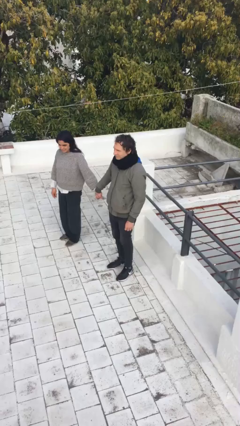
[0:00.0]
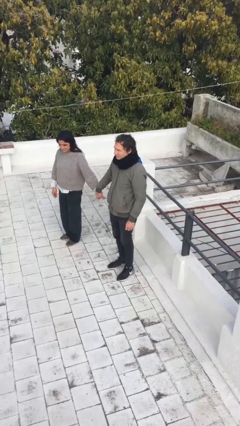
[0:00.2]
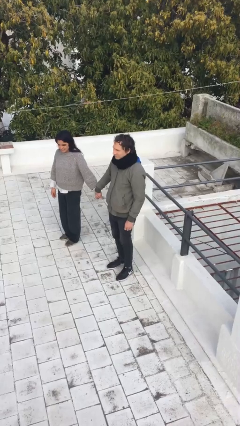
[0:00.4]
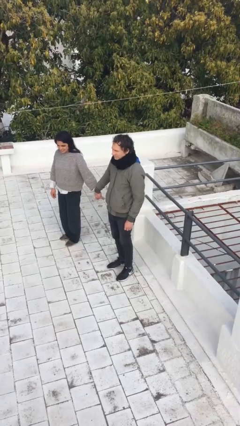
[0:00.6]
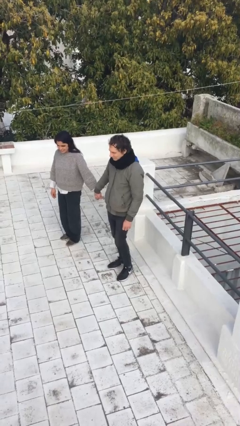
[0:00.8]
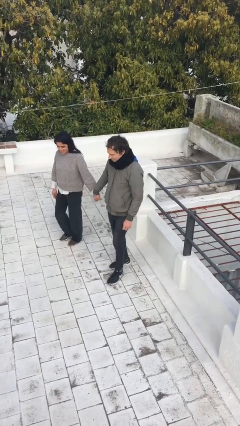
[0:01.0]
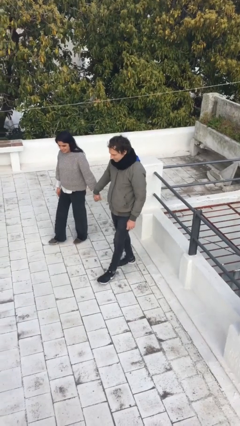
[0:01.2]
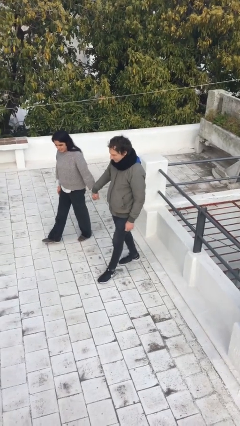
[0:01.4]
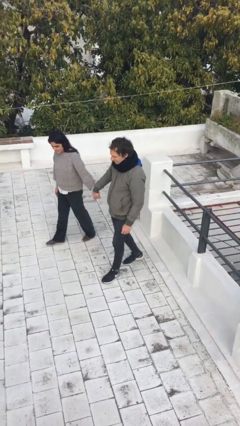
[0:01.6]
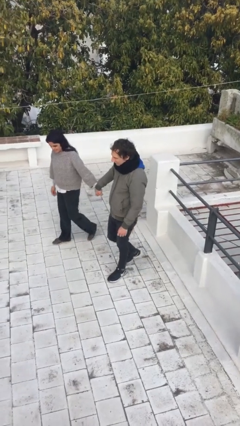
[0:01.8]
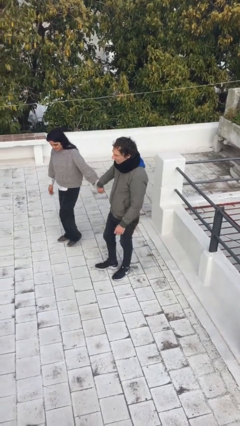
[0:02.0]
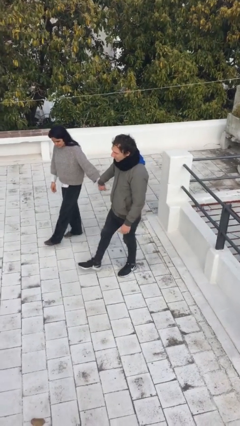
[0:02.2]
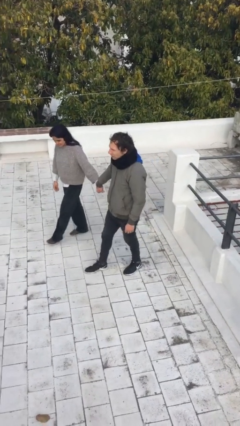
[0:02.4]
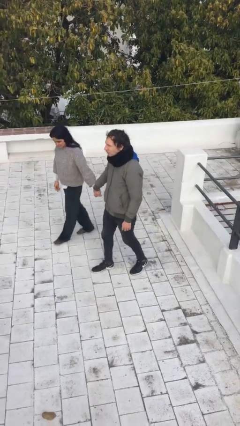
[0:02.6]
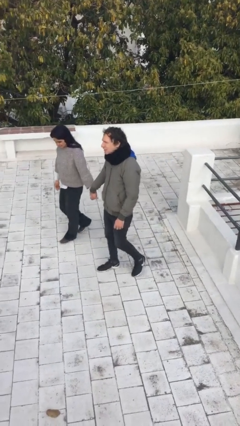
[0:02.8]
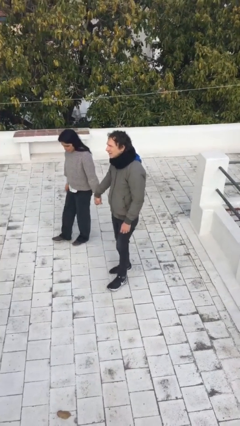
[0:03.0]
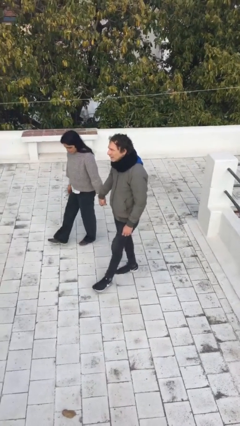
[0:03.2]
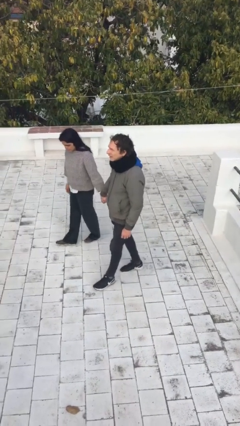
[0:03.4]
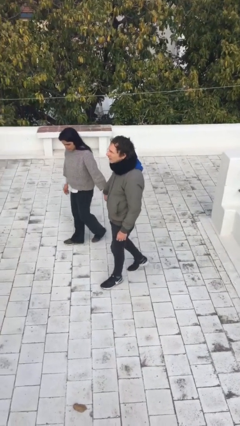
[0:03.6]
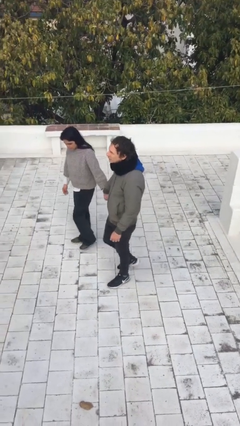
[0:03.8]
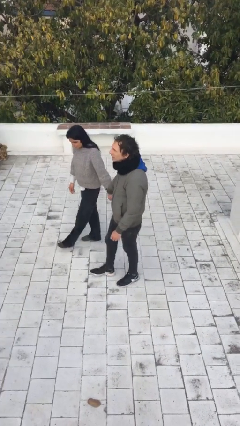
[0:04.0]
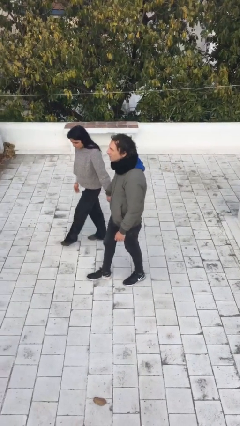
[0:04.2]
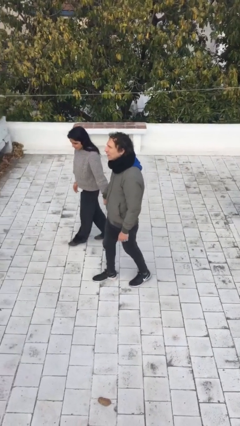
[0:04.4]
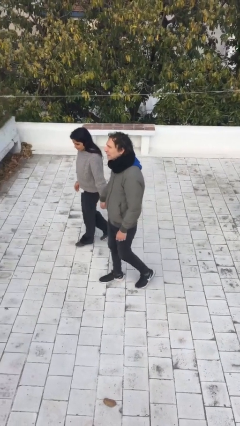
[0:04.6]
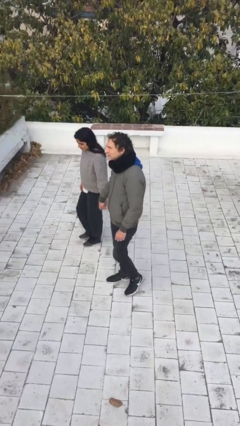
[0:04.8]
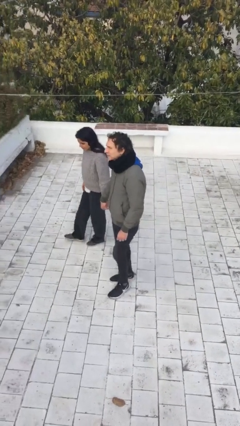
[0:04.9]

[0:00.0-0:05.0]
person holds hand

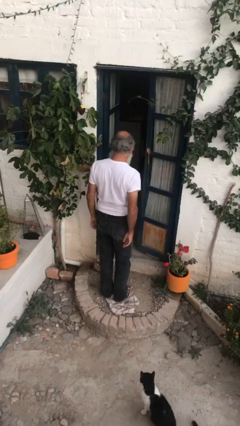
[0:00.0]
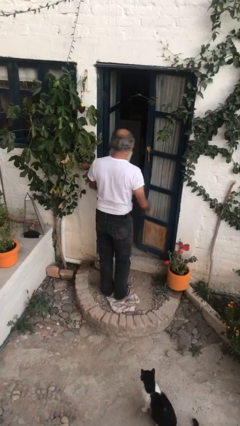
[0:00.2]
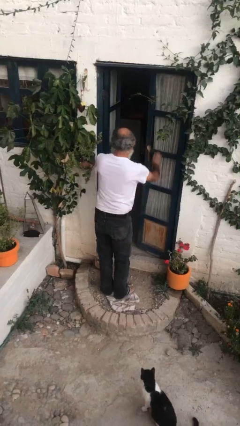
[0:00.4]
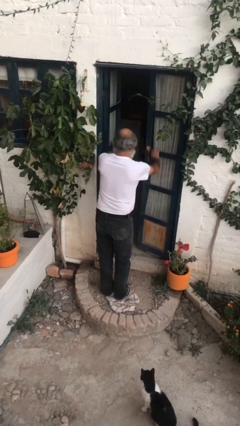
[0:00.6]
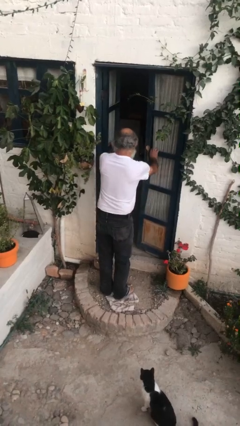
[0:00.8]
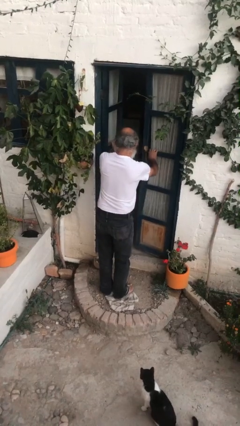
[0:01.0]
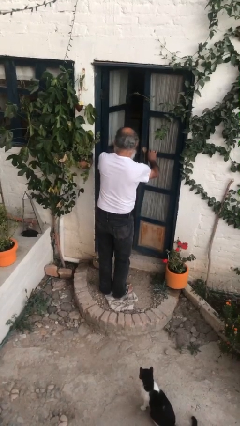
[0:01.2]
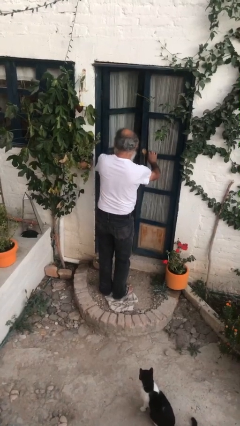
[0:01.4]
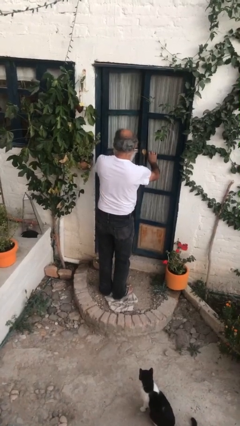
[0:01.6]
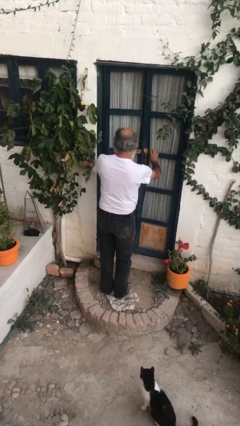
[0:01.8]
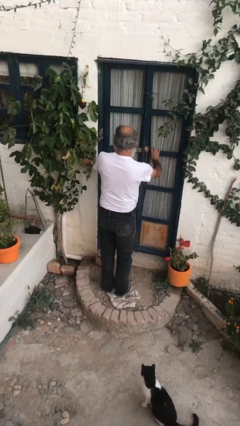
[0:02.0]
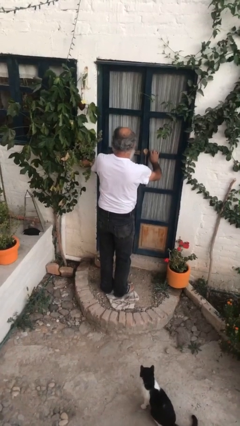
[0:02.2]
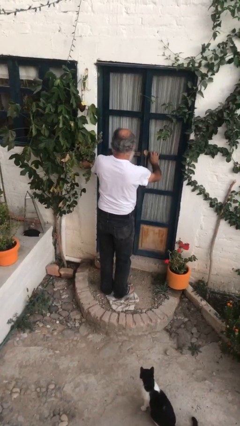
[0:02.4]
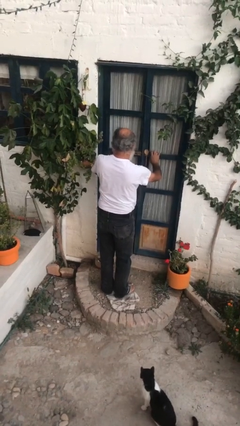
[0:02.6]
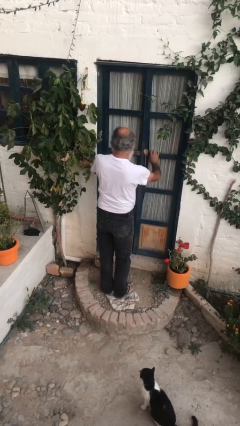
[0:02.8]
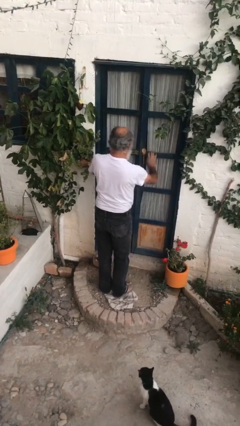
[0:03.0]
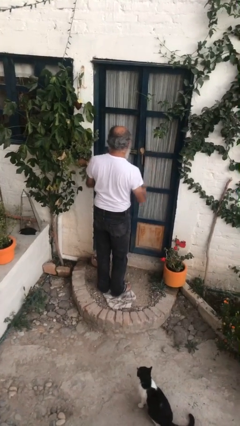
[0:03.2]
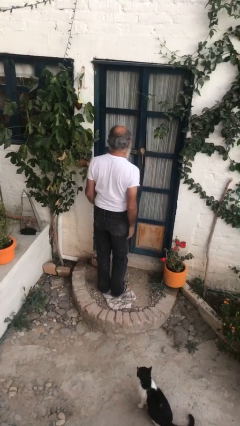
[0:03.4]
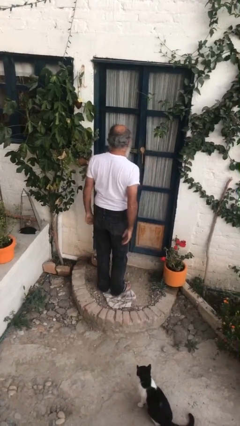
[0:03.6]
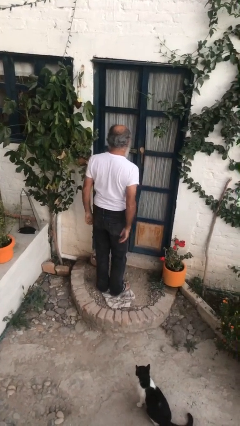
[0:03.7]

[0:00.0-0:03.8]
person closes facility door

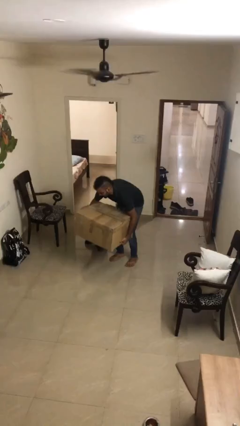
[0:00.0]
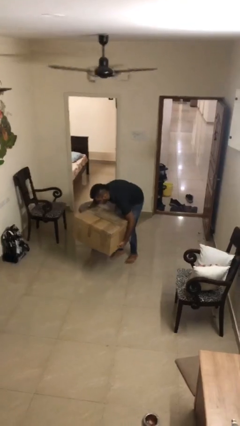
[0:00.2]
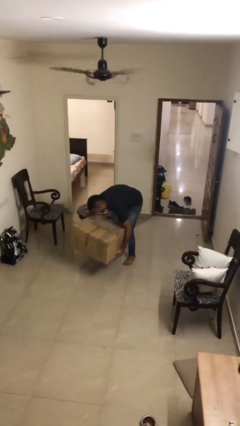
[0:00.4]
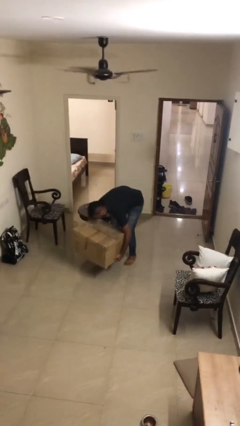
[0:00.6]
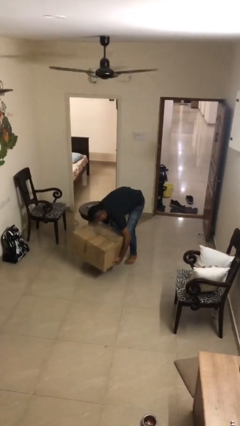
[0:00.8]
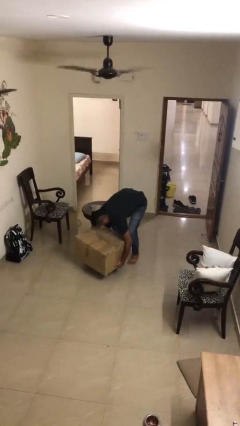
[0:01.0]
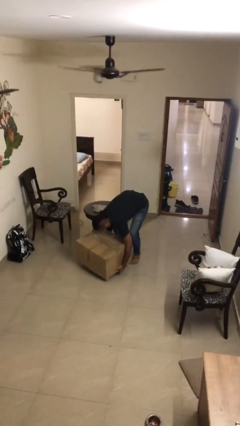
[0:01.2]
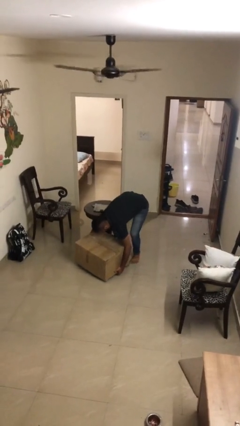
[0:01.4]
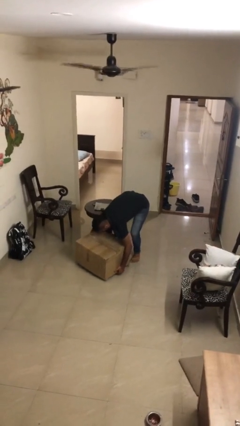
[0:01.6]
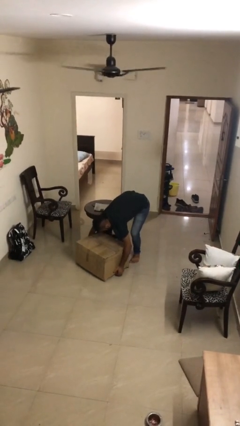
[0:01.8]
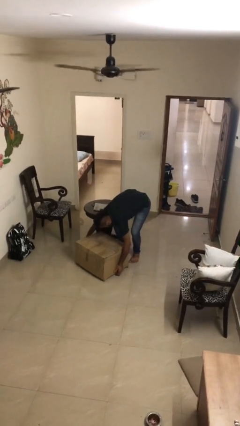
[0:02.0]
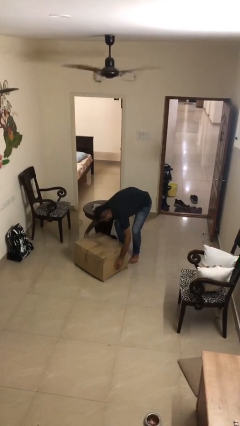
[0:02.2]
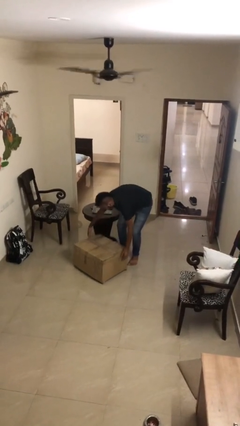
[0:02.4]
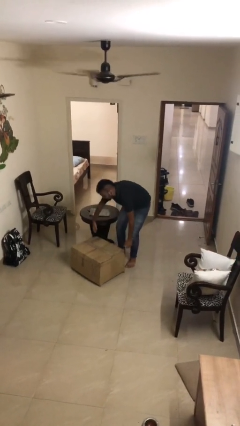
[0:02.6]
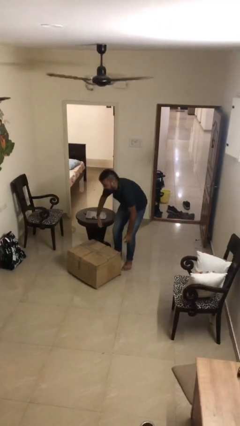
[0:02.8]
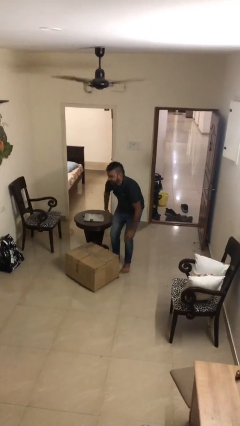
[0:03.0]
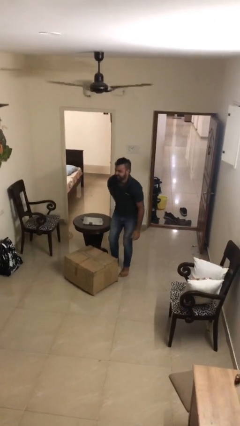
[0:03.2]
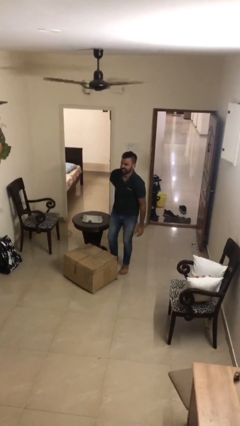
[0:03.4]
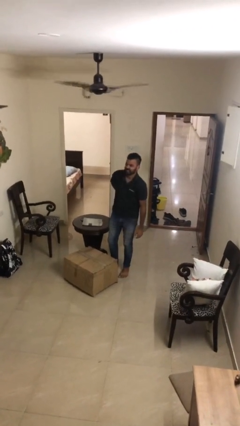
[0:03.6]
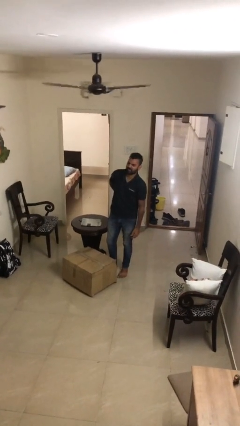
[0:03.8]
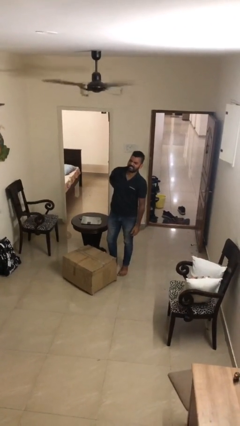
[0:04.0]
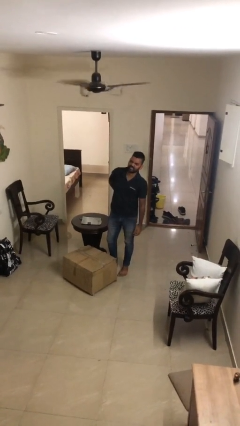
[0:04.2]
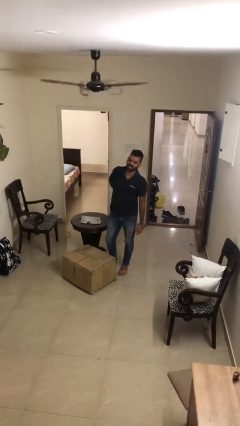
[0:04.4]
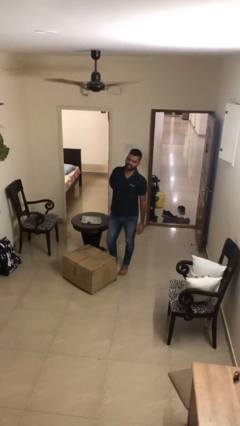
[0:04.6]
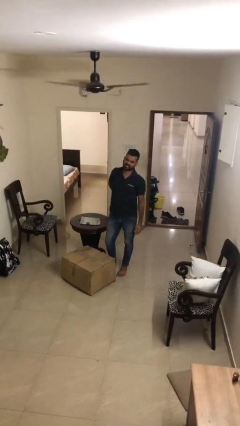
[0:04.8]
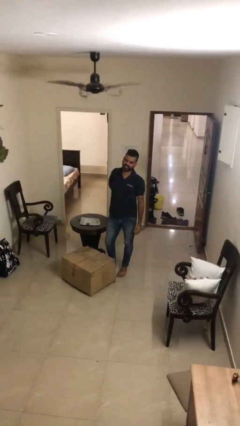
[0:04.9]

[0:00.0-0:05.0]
person puts down object on floor

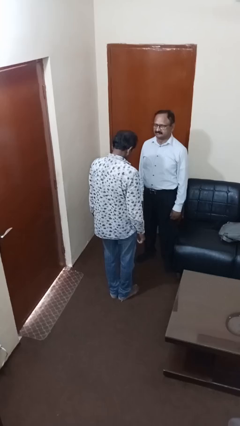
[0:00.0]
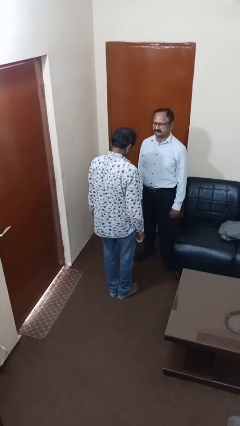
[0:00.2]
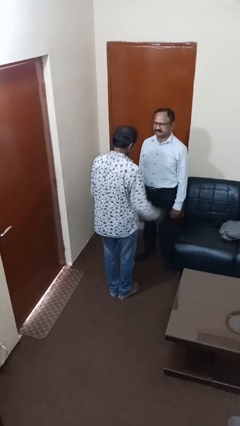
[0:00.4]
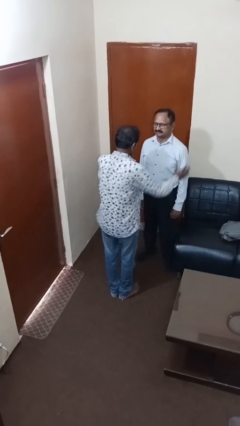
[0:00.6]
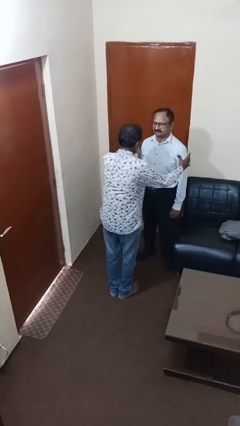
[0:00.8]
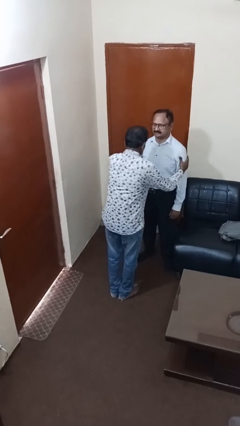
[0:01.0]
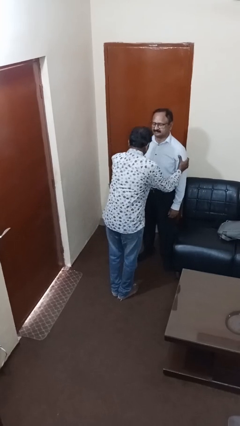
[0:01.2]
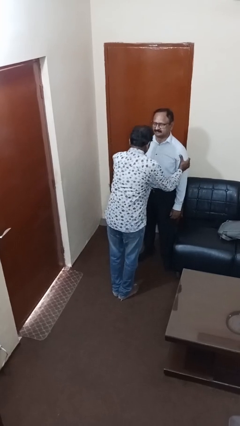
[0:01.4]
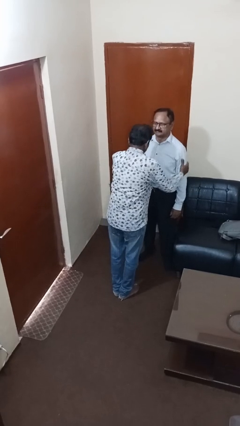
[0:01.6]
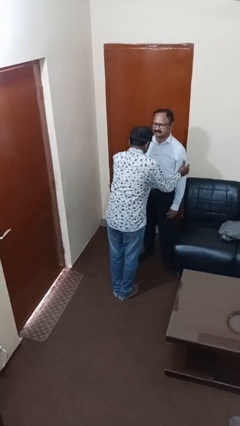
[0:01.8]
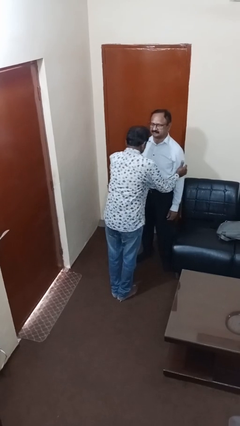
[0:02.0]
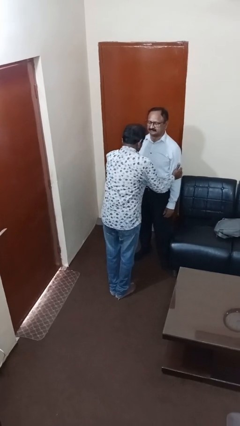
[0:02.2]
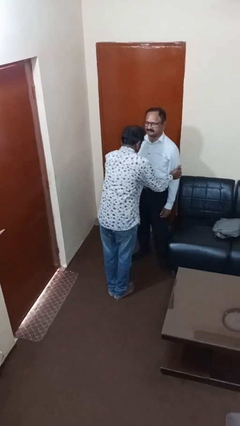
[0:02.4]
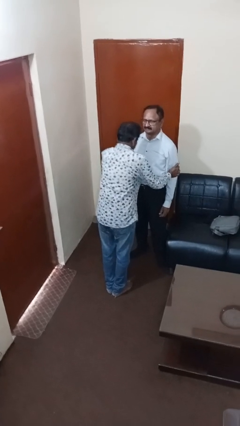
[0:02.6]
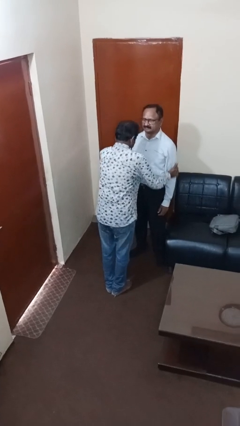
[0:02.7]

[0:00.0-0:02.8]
person grabs person by bicep

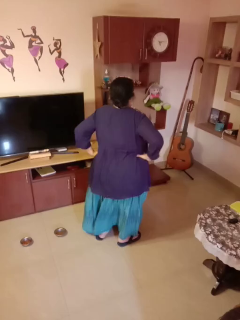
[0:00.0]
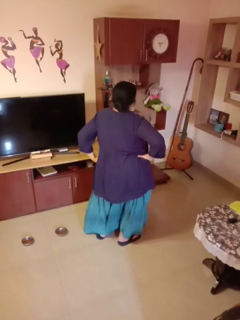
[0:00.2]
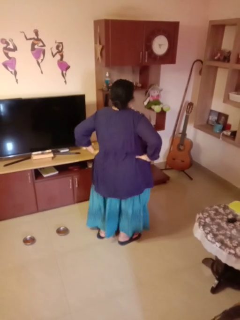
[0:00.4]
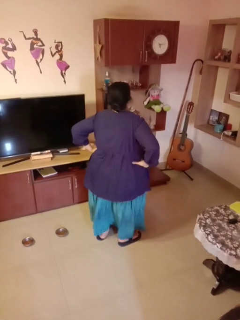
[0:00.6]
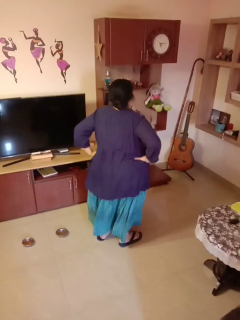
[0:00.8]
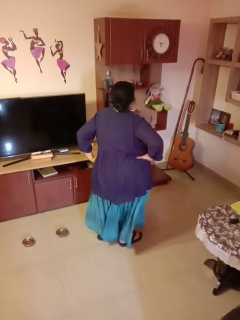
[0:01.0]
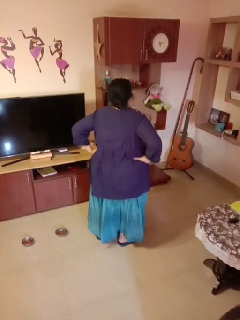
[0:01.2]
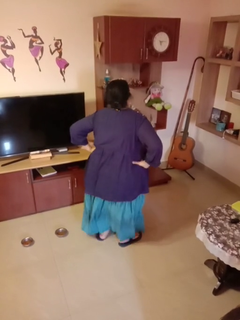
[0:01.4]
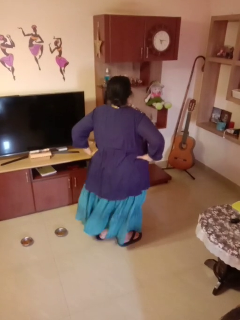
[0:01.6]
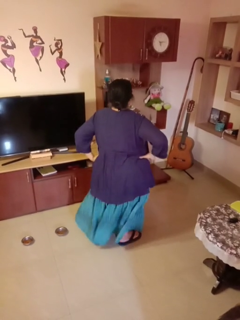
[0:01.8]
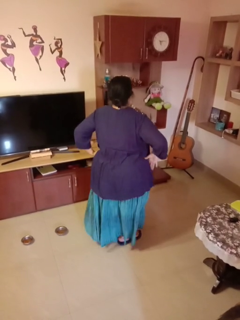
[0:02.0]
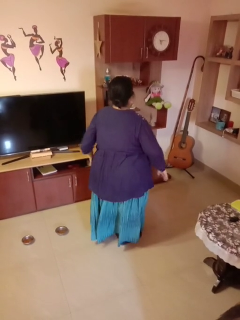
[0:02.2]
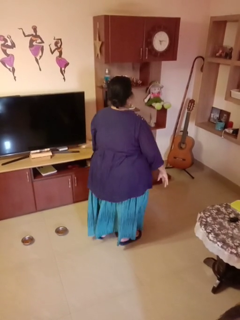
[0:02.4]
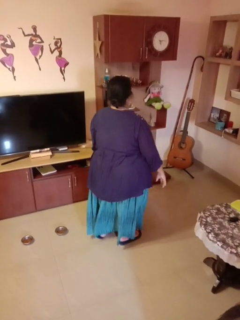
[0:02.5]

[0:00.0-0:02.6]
person wiggles hips
